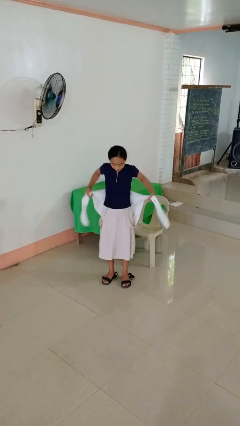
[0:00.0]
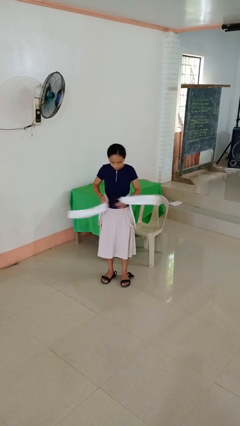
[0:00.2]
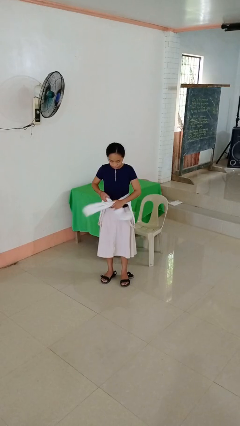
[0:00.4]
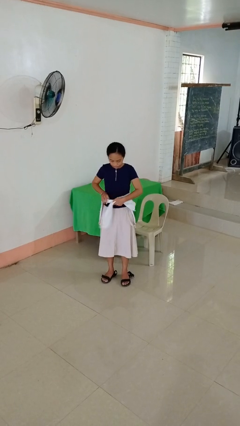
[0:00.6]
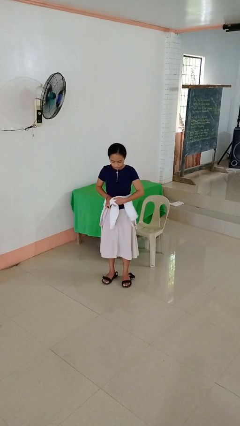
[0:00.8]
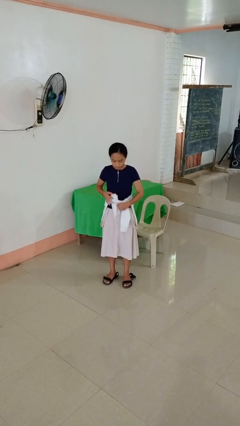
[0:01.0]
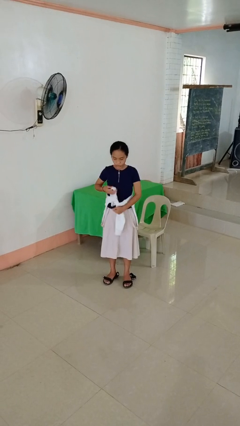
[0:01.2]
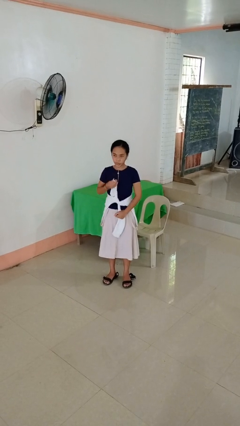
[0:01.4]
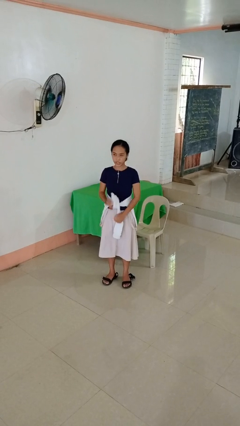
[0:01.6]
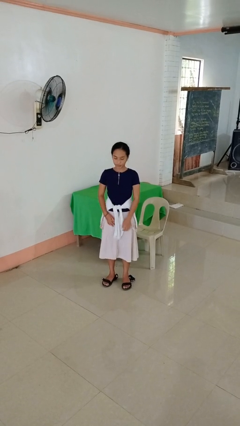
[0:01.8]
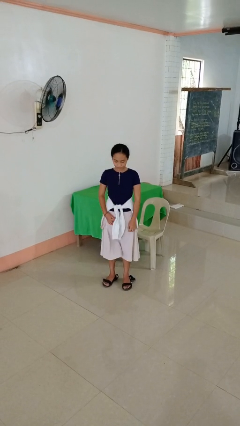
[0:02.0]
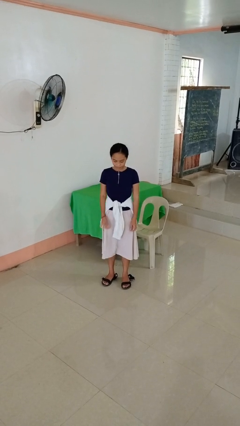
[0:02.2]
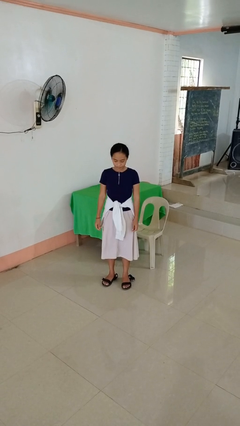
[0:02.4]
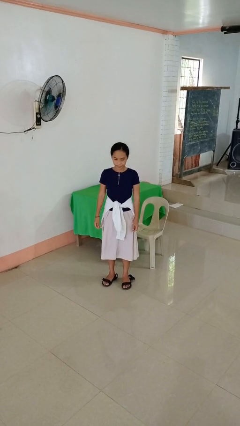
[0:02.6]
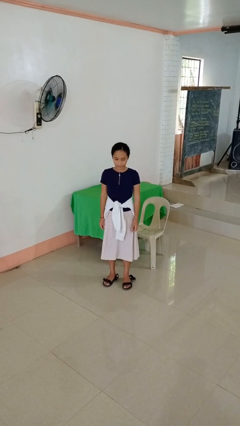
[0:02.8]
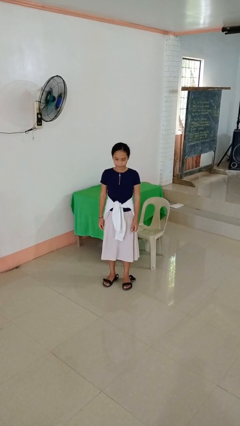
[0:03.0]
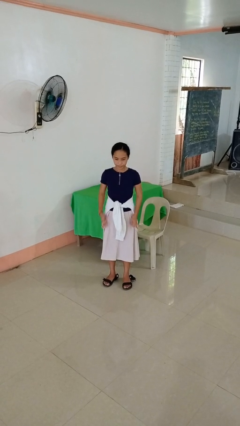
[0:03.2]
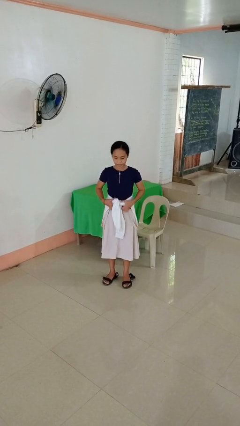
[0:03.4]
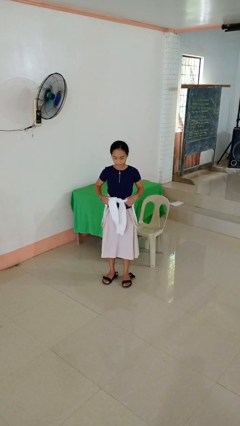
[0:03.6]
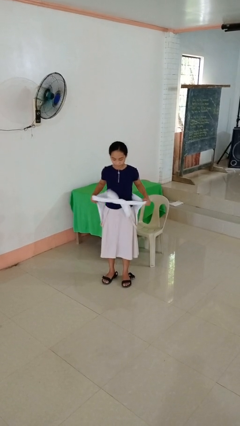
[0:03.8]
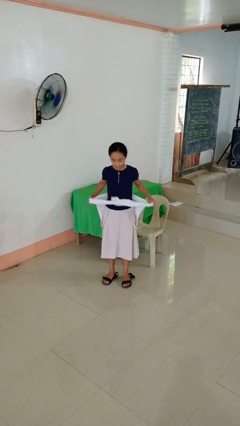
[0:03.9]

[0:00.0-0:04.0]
person ties jacket around waist

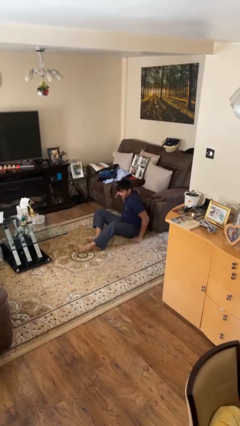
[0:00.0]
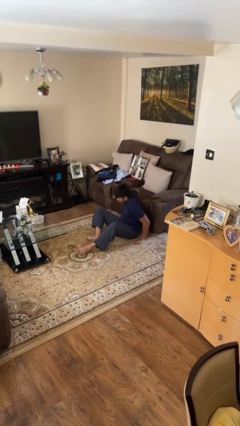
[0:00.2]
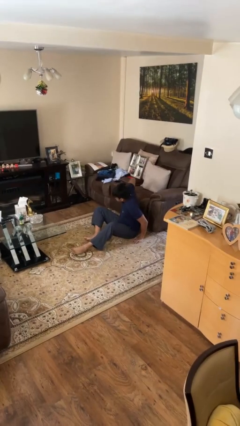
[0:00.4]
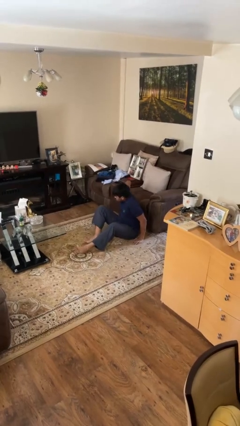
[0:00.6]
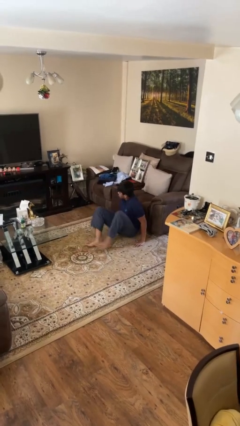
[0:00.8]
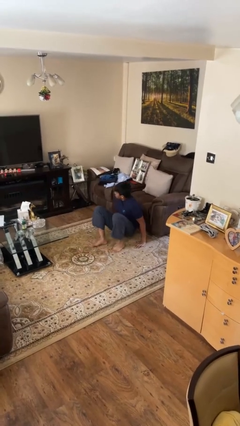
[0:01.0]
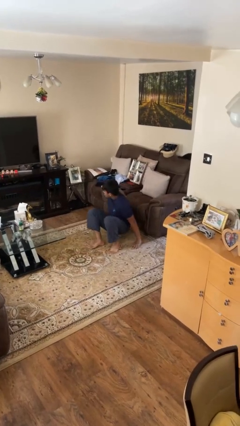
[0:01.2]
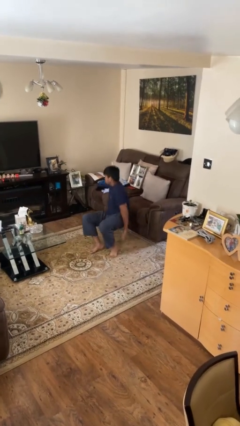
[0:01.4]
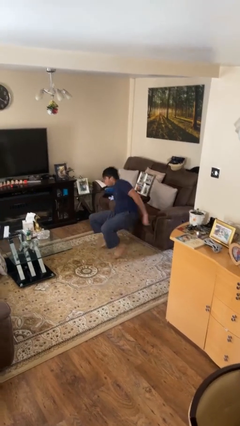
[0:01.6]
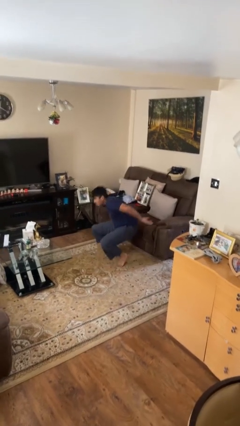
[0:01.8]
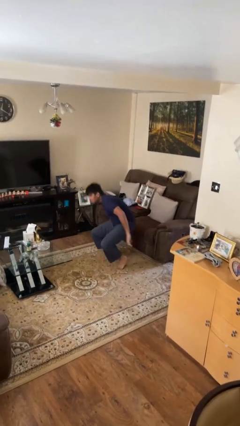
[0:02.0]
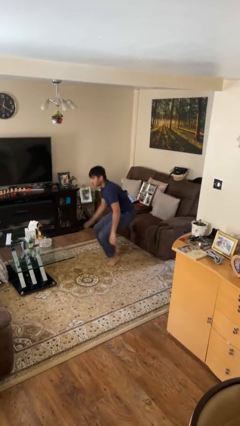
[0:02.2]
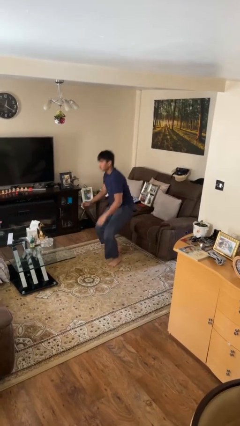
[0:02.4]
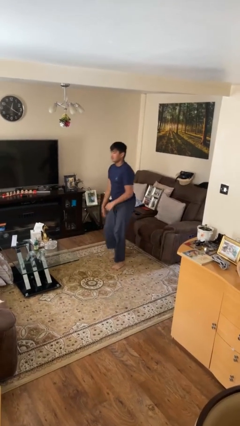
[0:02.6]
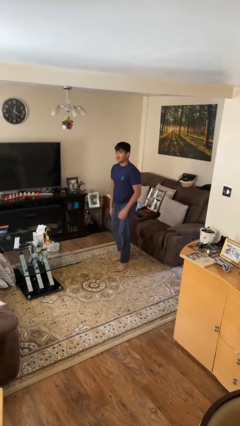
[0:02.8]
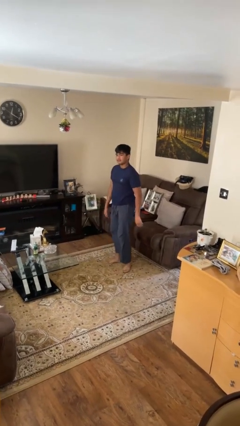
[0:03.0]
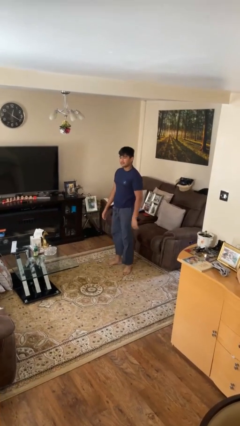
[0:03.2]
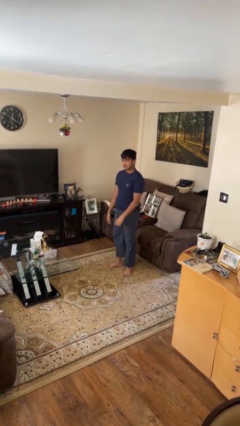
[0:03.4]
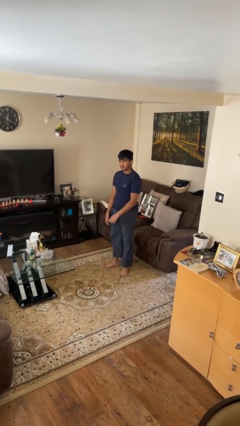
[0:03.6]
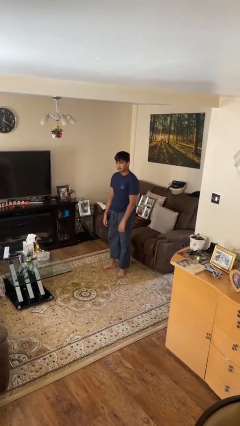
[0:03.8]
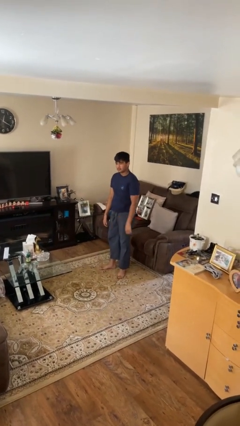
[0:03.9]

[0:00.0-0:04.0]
person stands up from floor

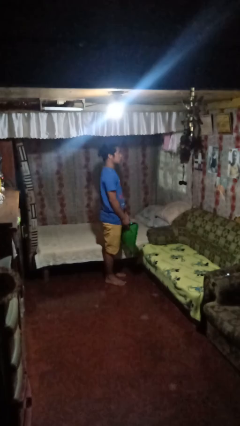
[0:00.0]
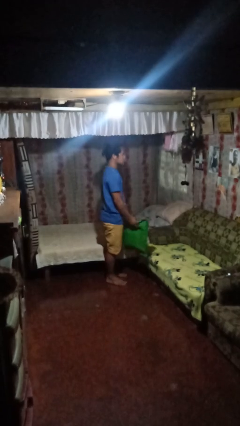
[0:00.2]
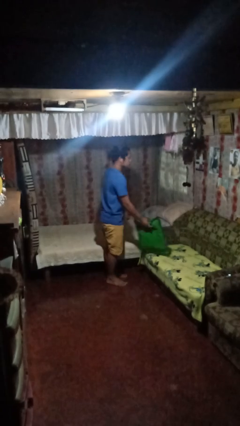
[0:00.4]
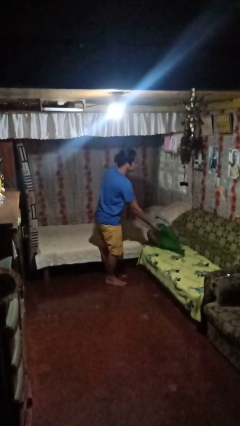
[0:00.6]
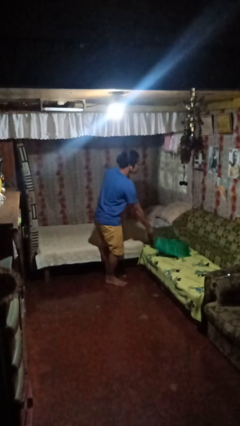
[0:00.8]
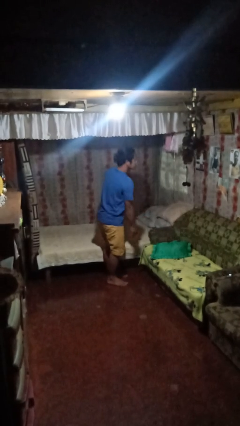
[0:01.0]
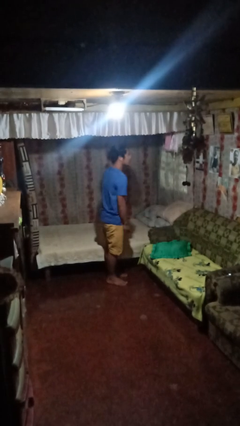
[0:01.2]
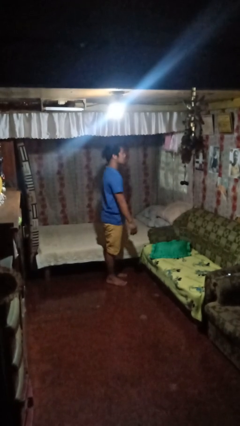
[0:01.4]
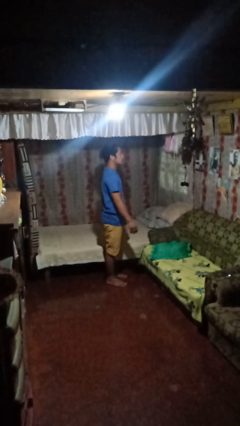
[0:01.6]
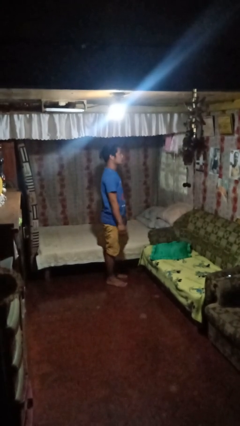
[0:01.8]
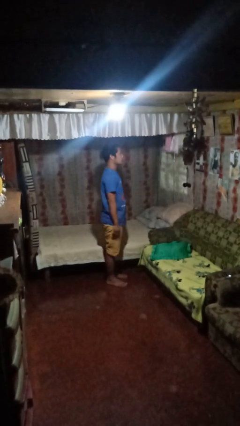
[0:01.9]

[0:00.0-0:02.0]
person puts down object on couch

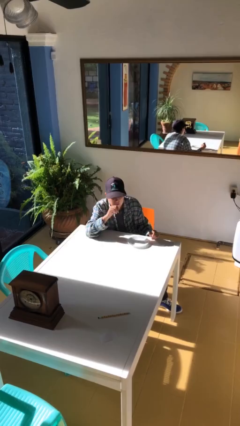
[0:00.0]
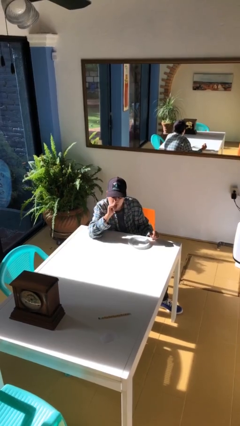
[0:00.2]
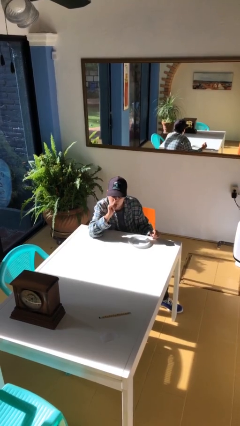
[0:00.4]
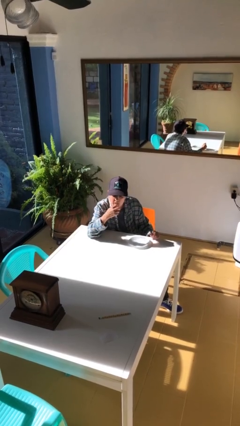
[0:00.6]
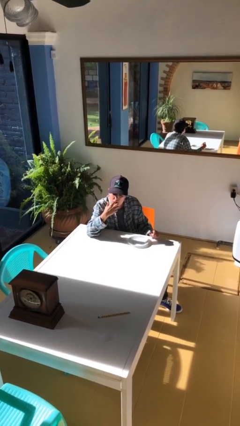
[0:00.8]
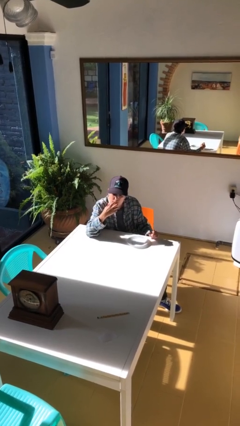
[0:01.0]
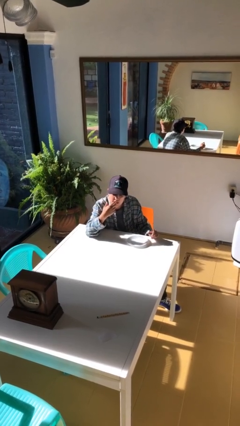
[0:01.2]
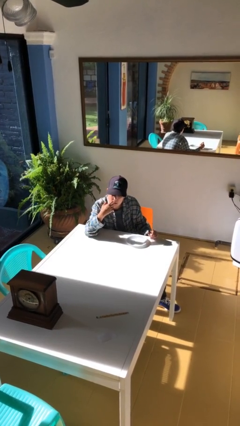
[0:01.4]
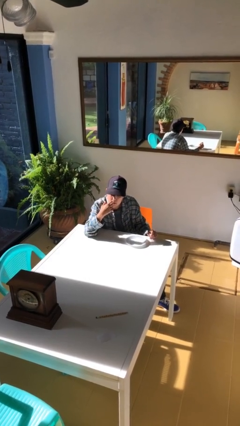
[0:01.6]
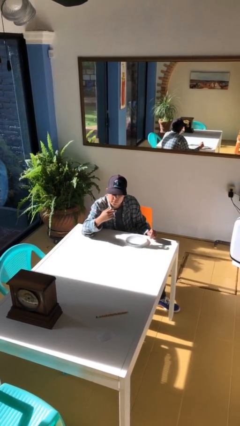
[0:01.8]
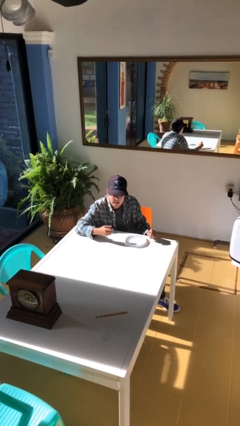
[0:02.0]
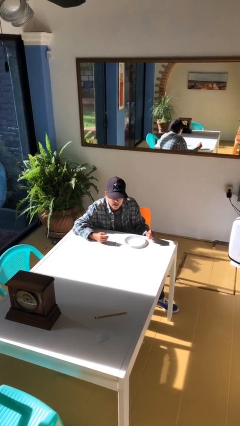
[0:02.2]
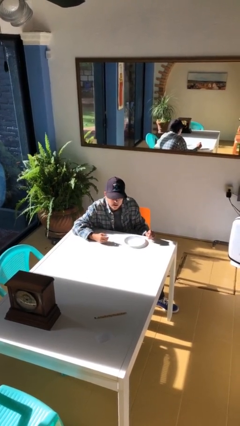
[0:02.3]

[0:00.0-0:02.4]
person licks fingers

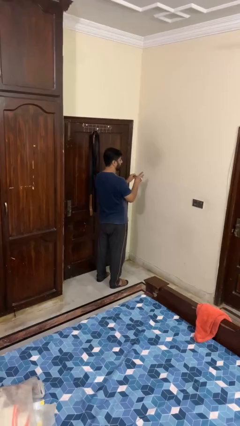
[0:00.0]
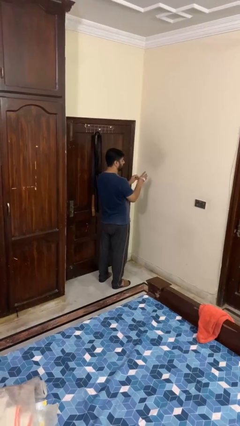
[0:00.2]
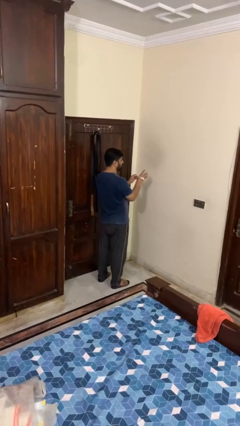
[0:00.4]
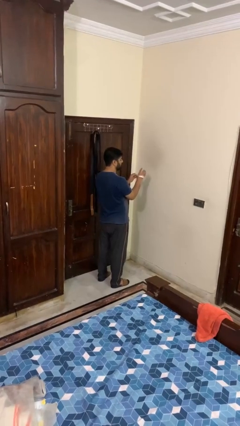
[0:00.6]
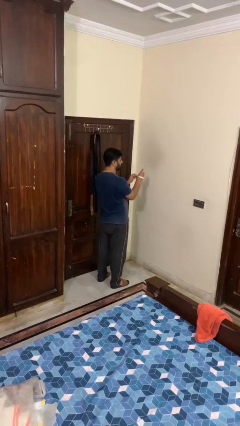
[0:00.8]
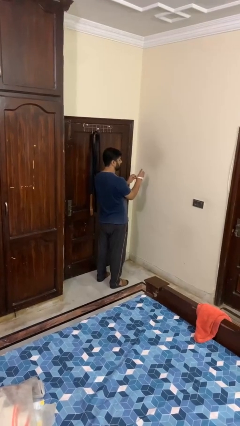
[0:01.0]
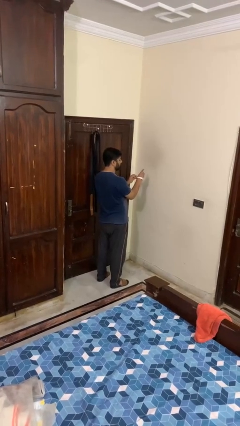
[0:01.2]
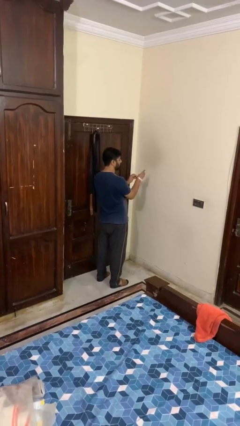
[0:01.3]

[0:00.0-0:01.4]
person puts on wristwatch

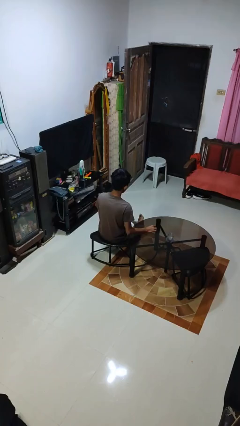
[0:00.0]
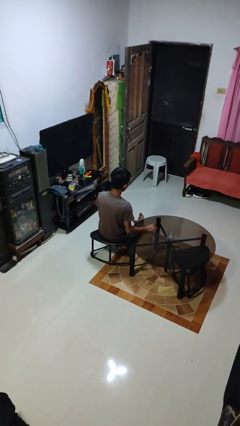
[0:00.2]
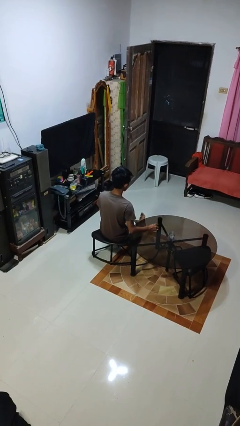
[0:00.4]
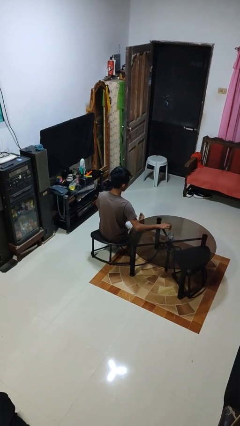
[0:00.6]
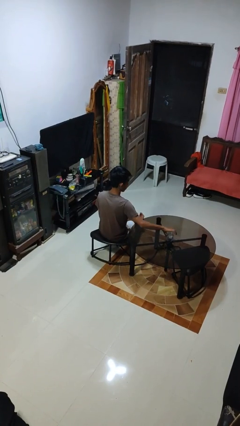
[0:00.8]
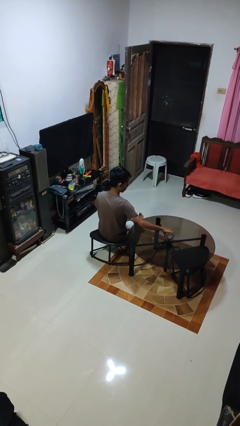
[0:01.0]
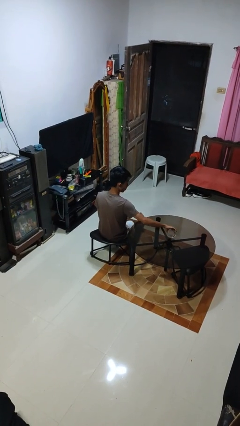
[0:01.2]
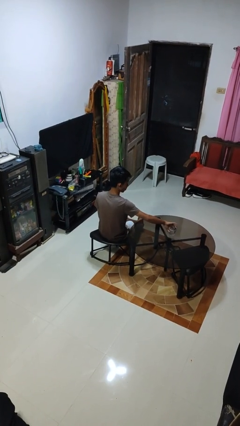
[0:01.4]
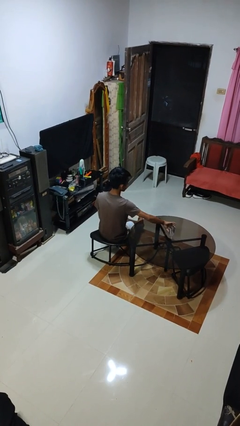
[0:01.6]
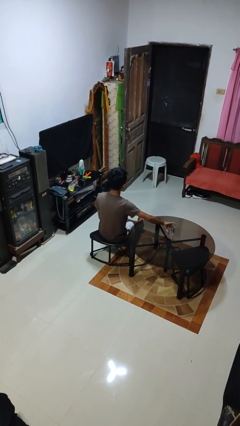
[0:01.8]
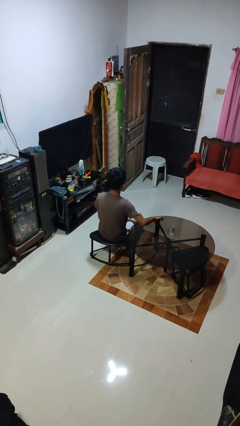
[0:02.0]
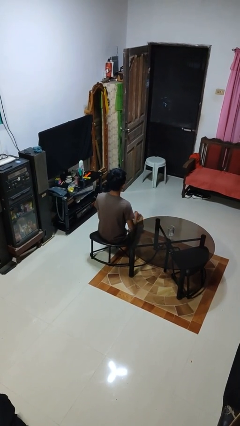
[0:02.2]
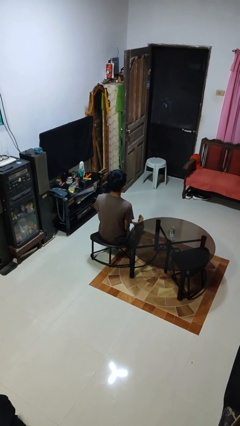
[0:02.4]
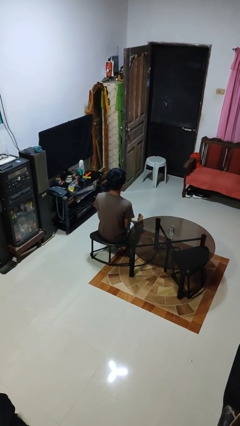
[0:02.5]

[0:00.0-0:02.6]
person sets upright glass

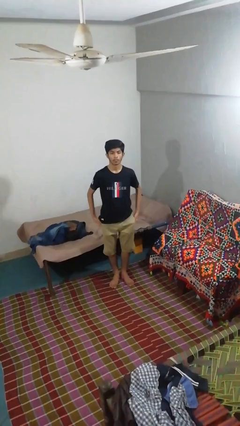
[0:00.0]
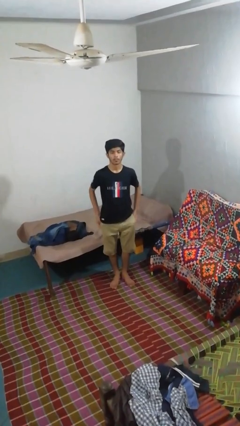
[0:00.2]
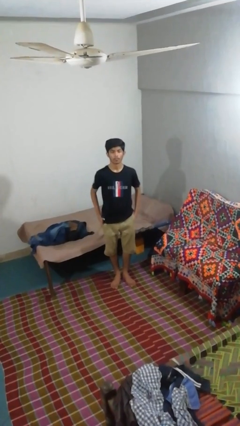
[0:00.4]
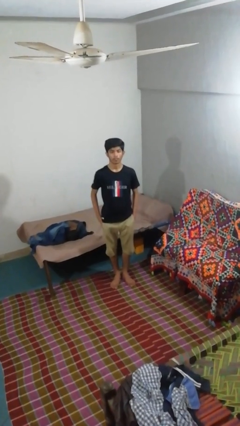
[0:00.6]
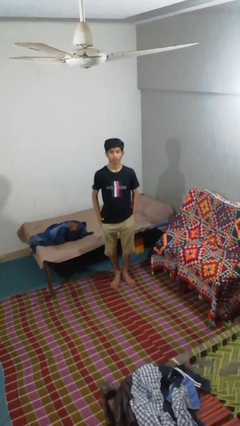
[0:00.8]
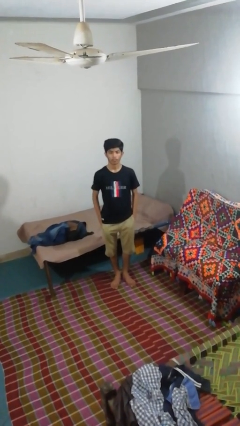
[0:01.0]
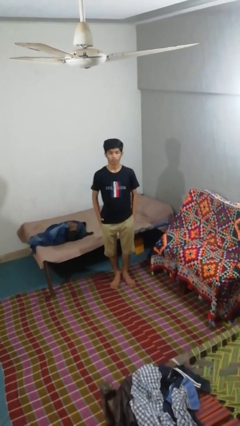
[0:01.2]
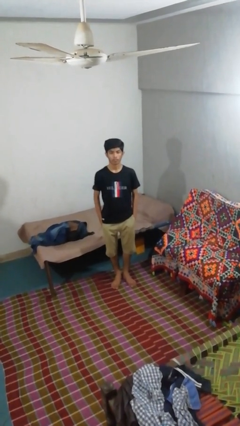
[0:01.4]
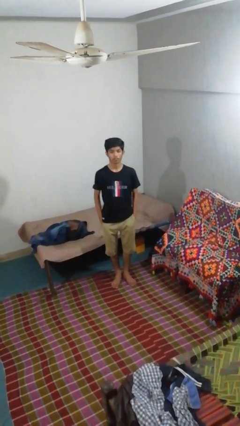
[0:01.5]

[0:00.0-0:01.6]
person puts hands in back pockets
